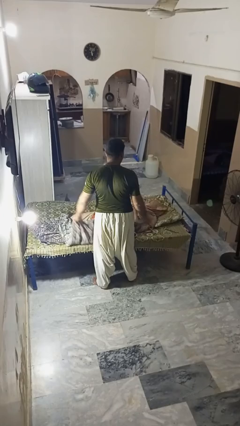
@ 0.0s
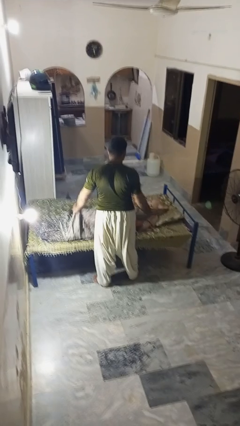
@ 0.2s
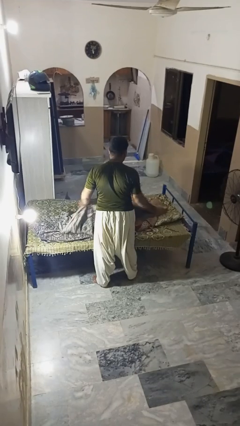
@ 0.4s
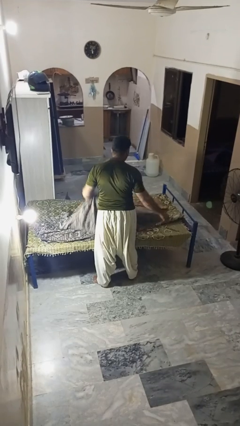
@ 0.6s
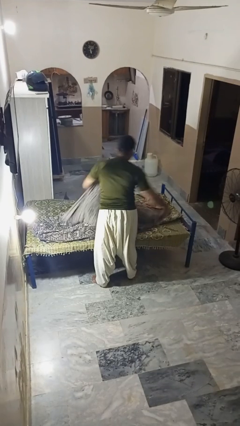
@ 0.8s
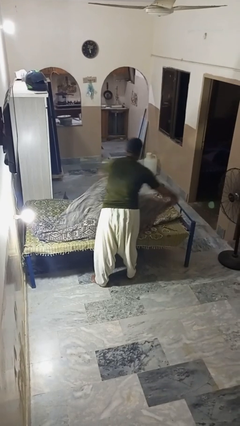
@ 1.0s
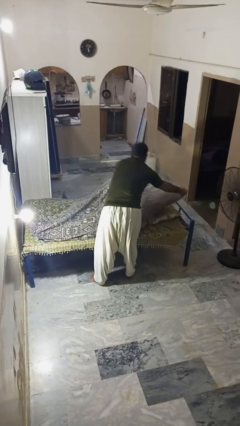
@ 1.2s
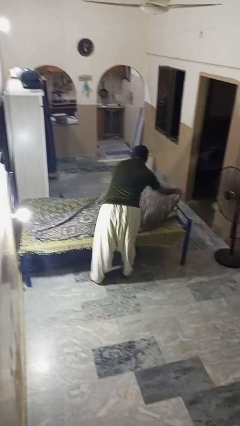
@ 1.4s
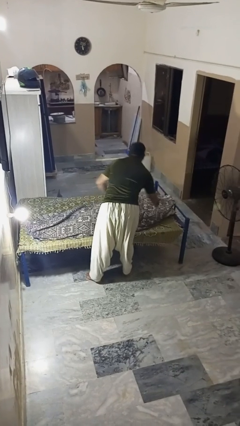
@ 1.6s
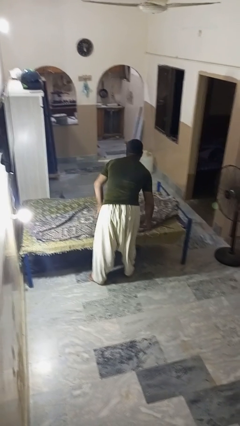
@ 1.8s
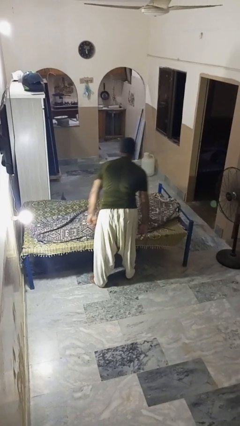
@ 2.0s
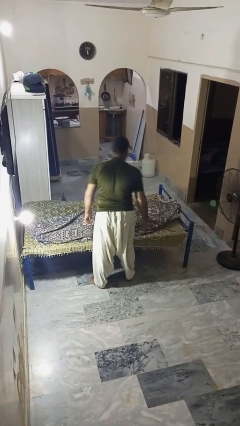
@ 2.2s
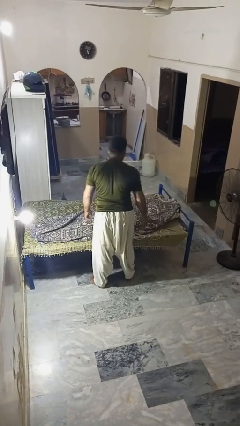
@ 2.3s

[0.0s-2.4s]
person covers friend with blanket

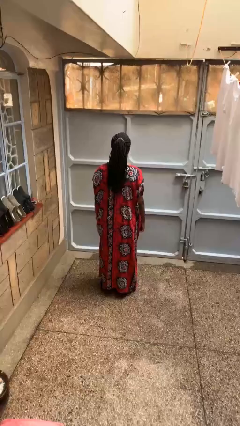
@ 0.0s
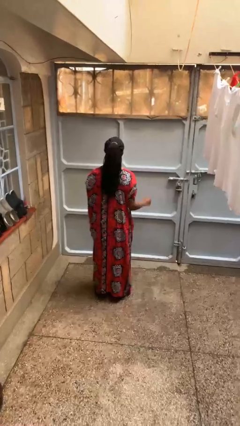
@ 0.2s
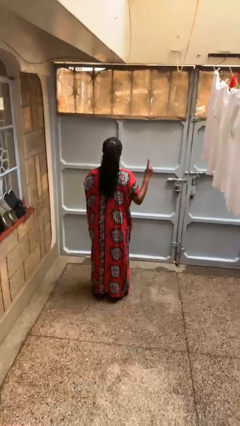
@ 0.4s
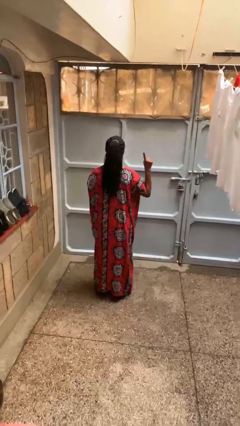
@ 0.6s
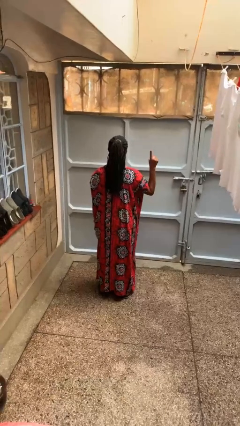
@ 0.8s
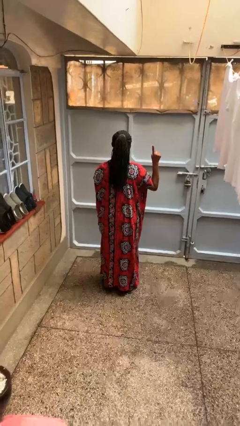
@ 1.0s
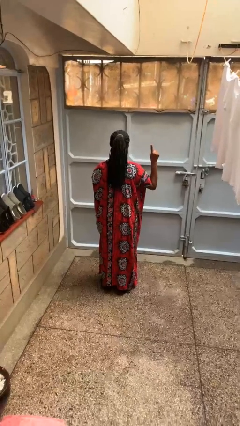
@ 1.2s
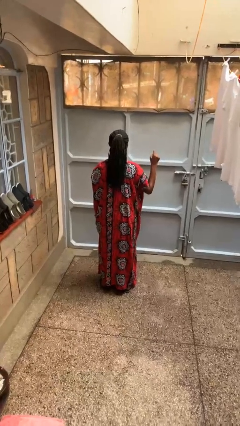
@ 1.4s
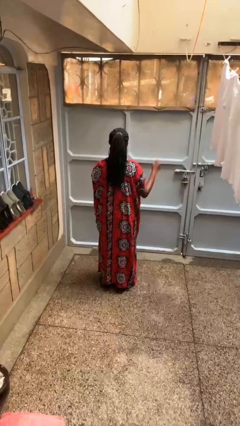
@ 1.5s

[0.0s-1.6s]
person gestures number one

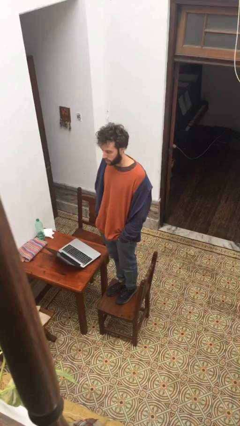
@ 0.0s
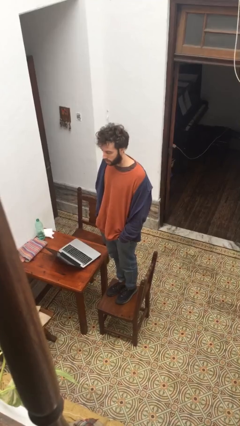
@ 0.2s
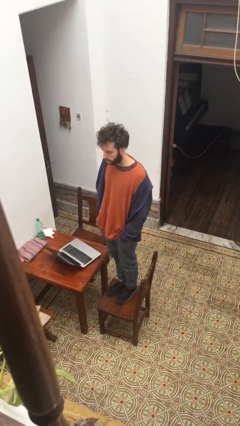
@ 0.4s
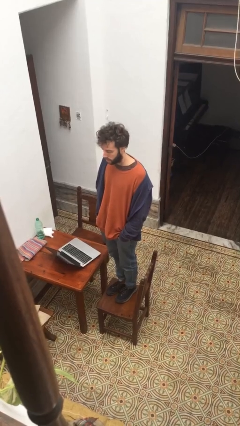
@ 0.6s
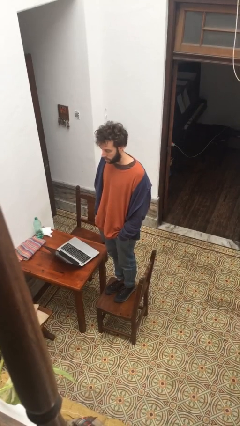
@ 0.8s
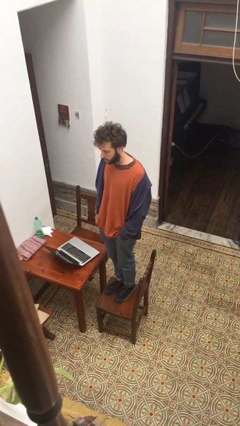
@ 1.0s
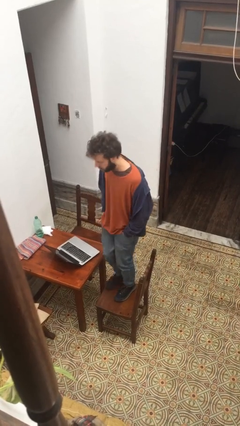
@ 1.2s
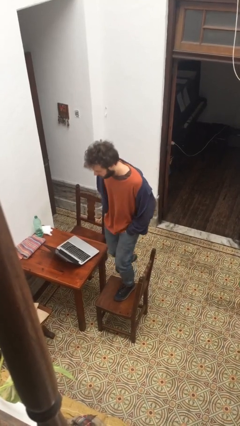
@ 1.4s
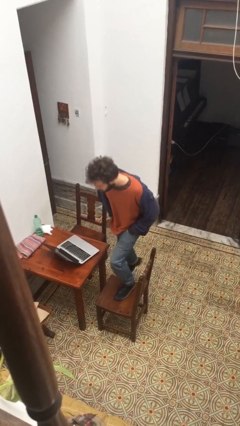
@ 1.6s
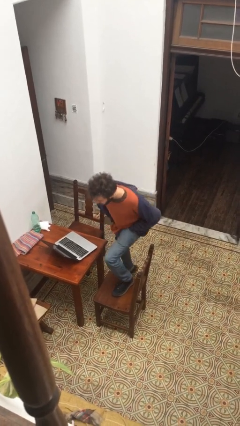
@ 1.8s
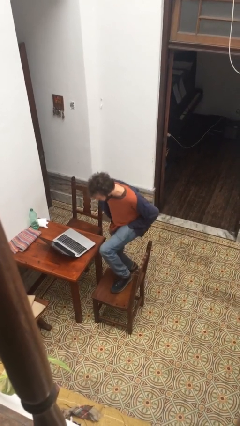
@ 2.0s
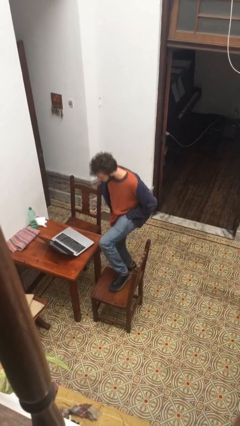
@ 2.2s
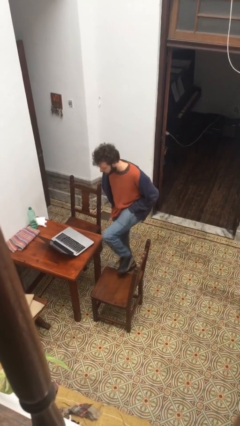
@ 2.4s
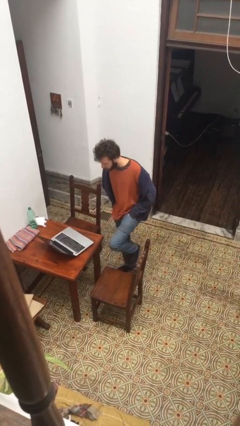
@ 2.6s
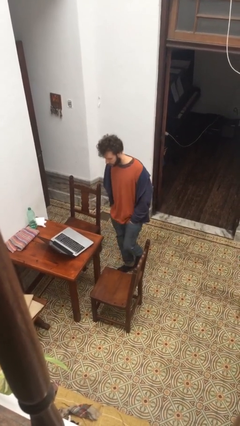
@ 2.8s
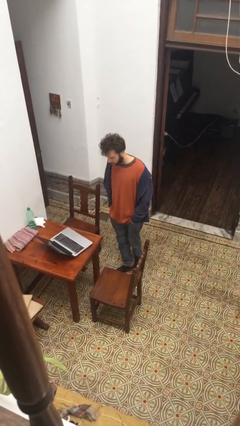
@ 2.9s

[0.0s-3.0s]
person climbs off chair

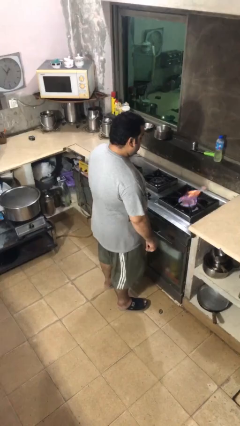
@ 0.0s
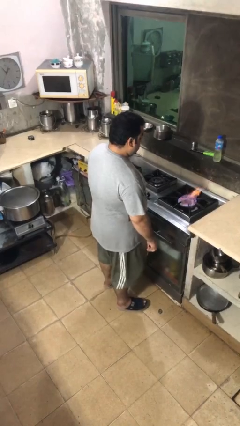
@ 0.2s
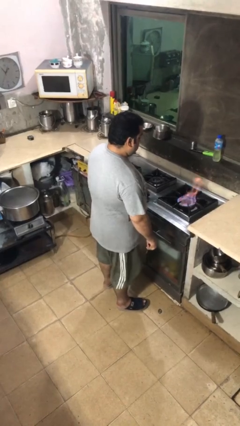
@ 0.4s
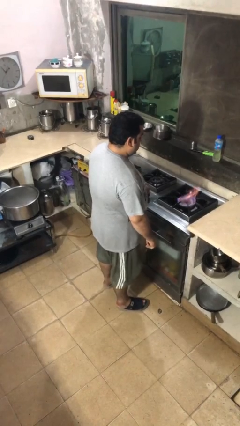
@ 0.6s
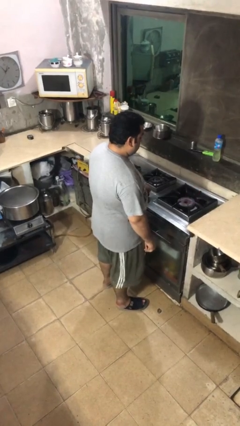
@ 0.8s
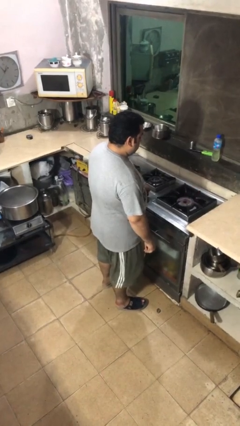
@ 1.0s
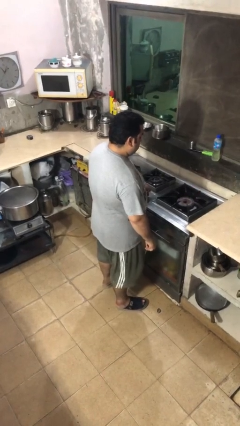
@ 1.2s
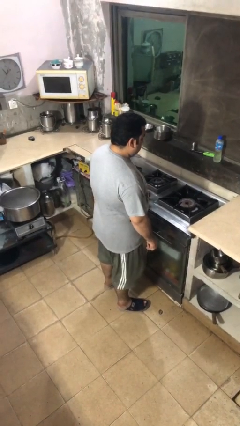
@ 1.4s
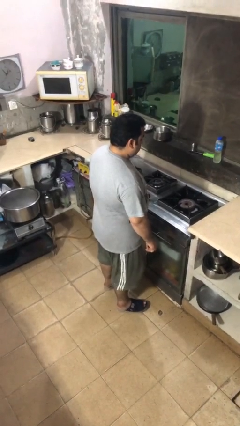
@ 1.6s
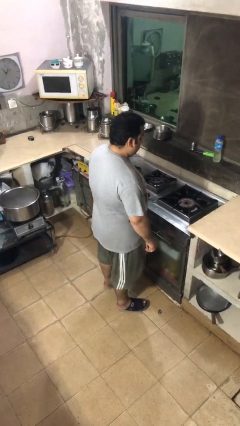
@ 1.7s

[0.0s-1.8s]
person turns off stovetop

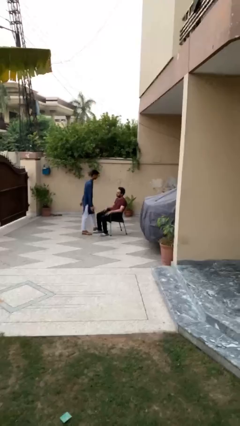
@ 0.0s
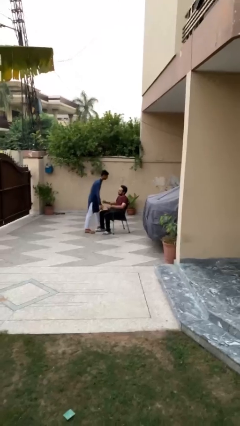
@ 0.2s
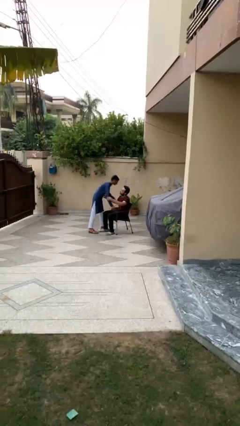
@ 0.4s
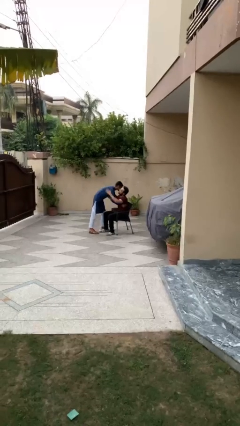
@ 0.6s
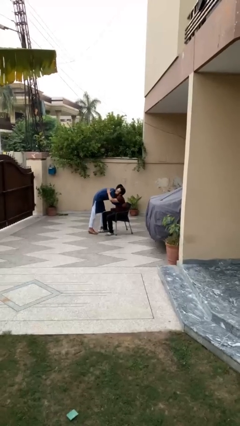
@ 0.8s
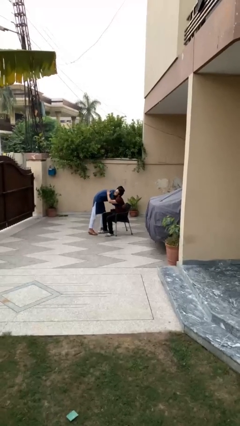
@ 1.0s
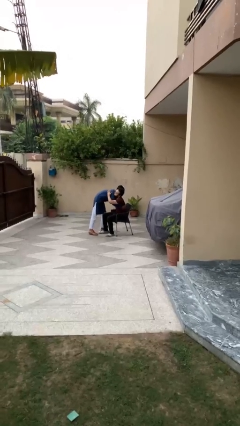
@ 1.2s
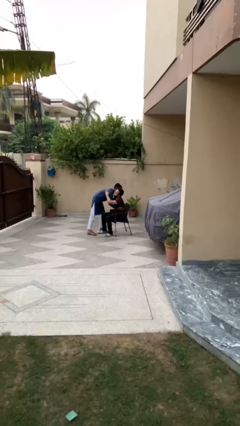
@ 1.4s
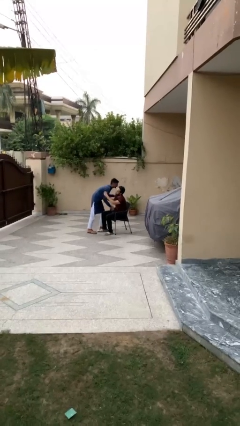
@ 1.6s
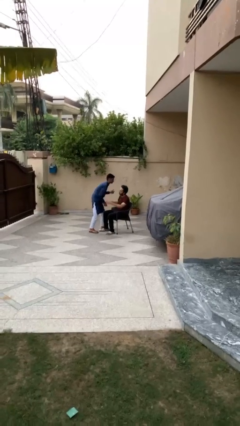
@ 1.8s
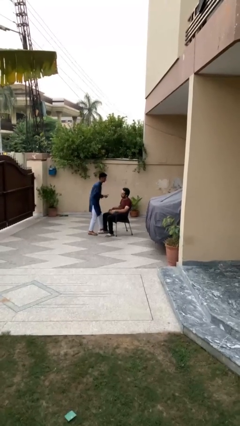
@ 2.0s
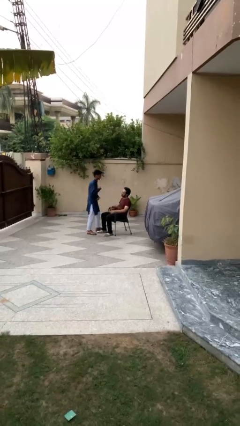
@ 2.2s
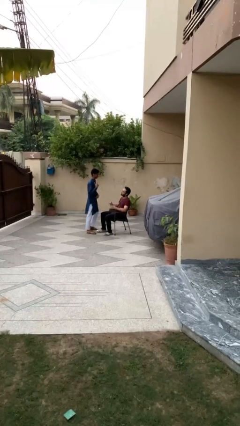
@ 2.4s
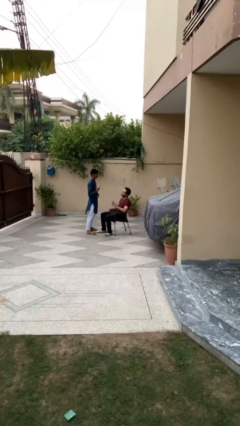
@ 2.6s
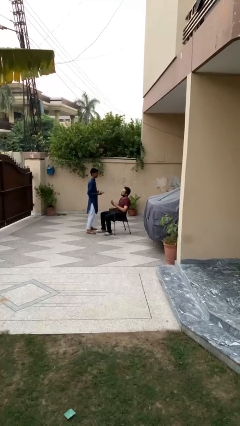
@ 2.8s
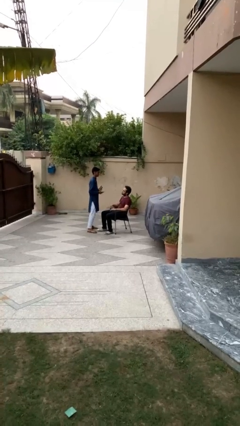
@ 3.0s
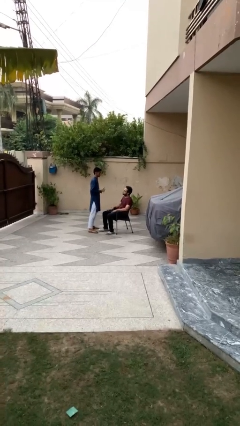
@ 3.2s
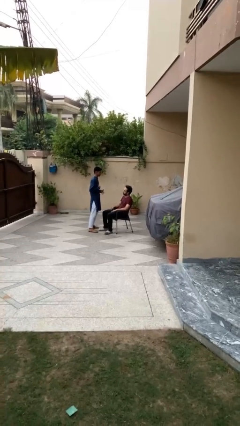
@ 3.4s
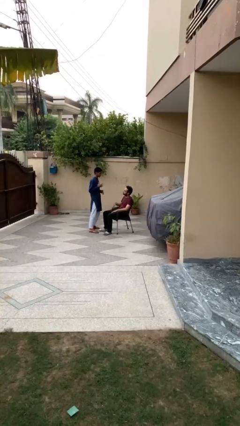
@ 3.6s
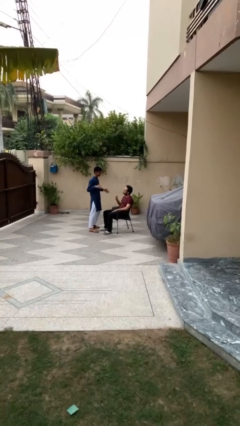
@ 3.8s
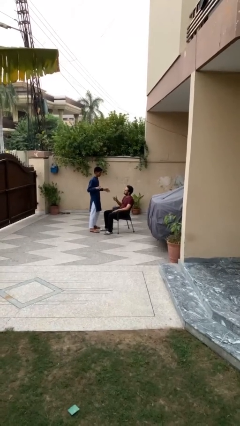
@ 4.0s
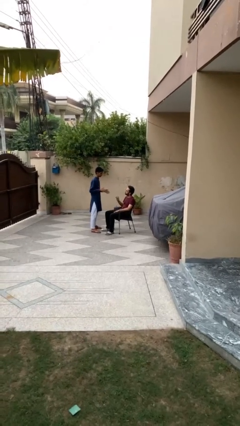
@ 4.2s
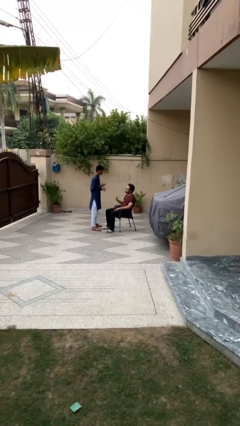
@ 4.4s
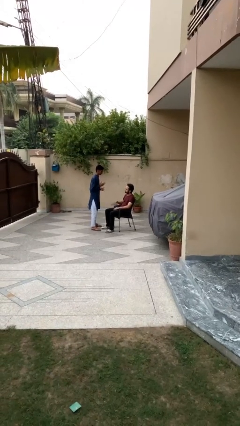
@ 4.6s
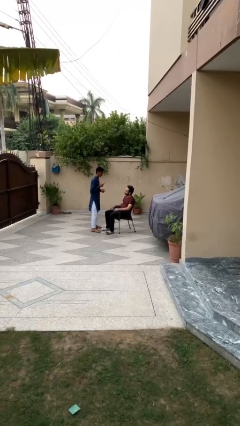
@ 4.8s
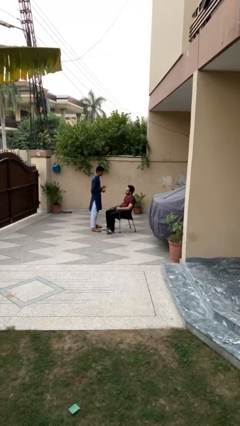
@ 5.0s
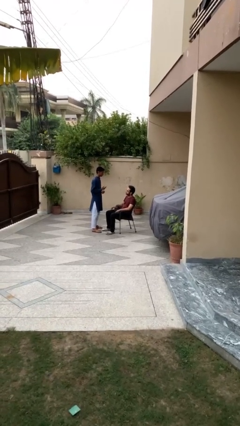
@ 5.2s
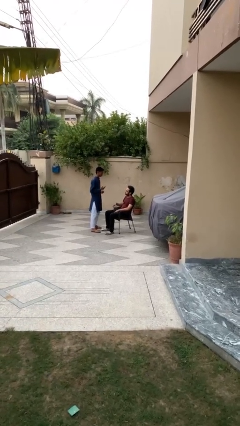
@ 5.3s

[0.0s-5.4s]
person embraces person

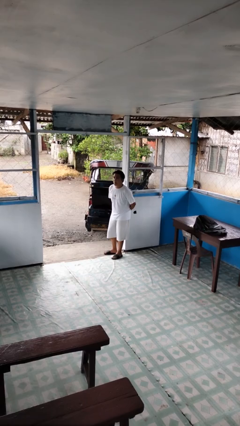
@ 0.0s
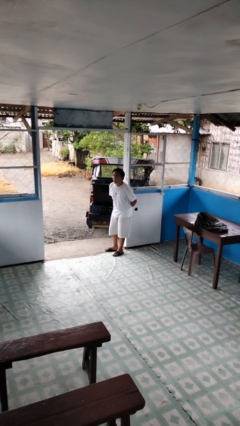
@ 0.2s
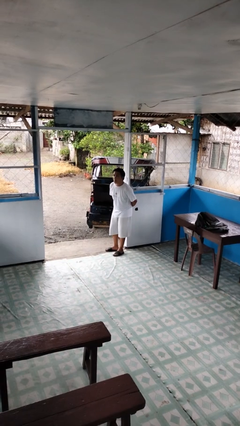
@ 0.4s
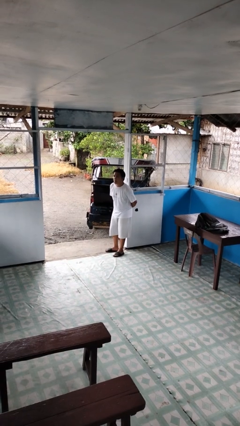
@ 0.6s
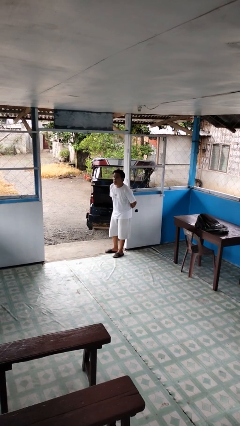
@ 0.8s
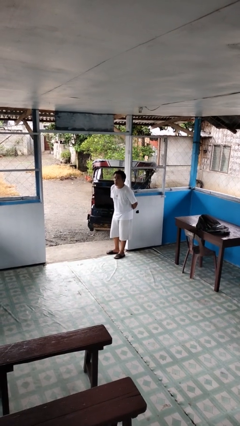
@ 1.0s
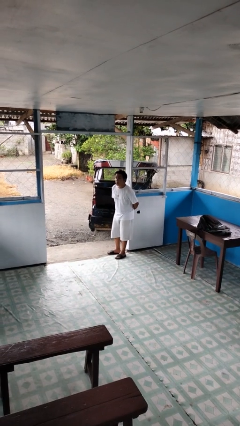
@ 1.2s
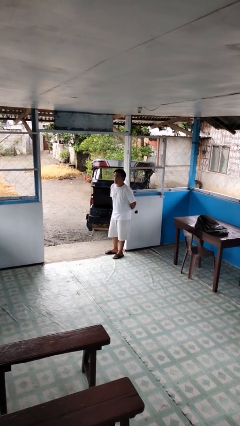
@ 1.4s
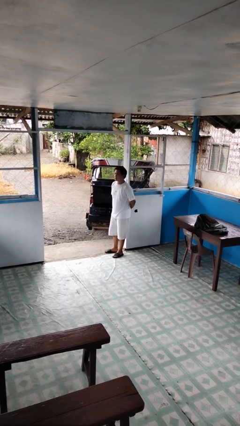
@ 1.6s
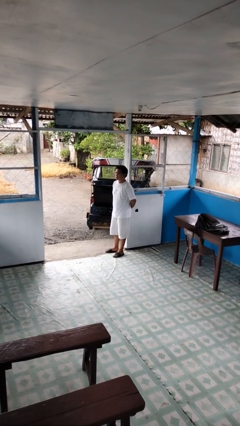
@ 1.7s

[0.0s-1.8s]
person sticks out tongue

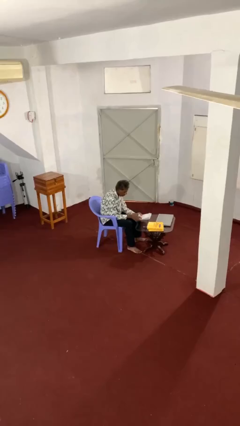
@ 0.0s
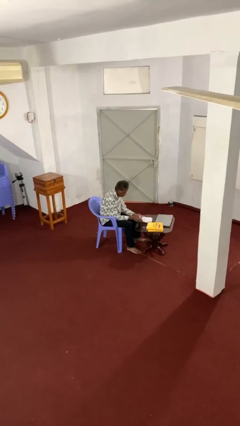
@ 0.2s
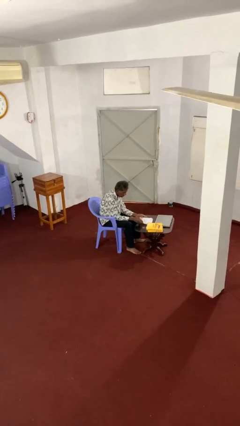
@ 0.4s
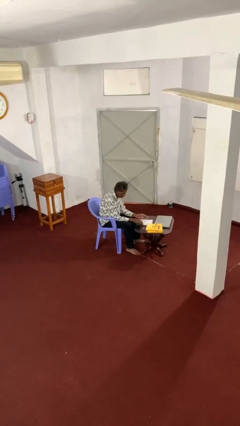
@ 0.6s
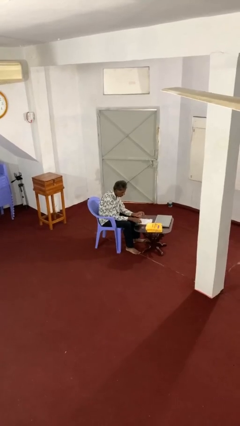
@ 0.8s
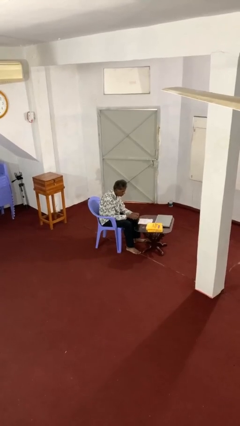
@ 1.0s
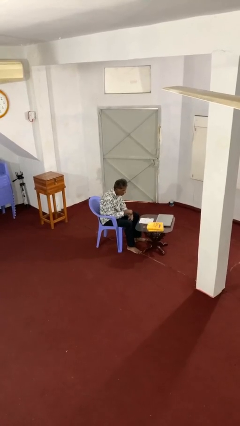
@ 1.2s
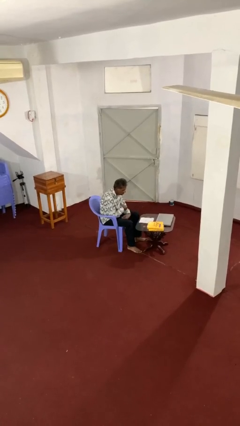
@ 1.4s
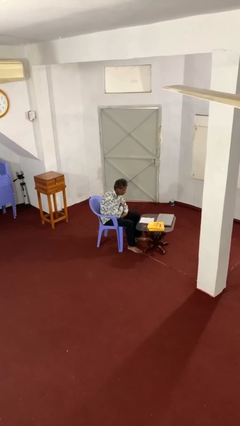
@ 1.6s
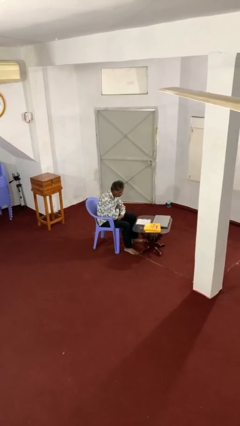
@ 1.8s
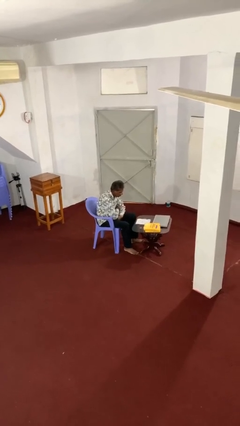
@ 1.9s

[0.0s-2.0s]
person puts down object on table
